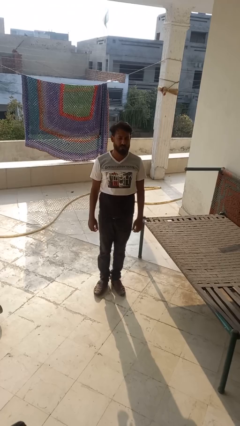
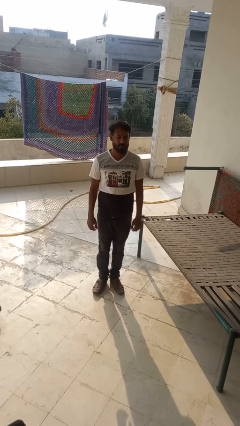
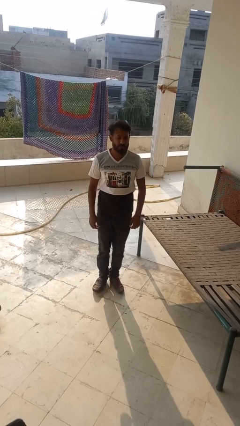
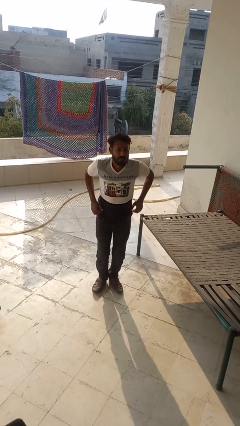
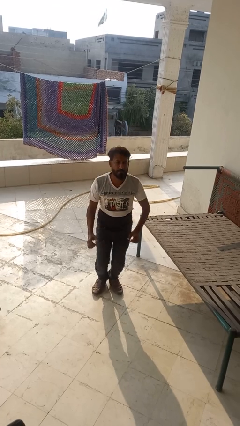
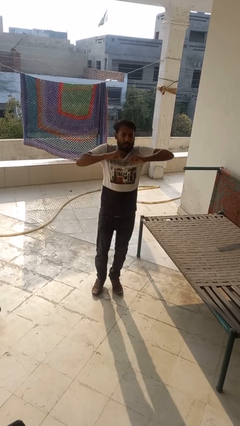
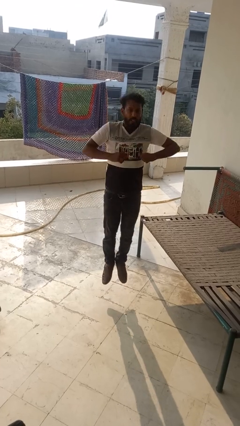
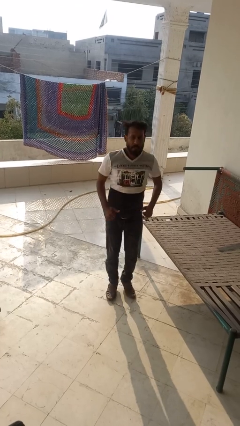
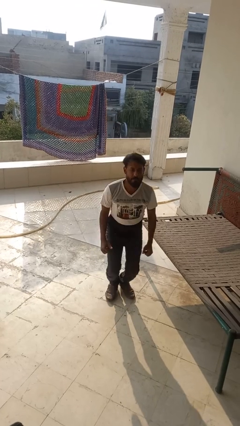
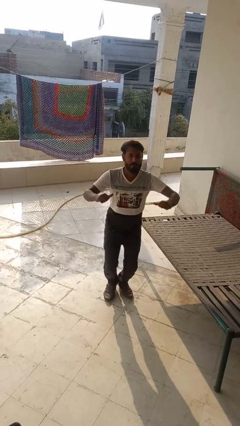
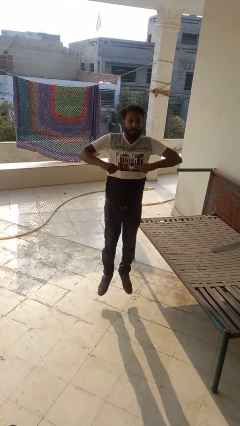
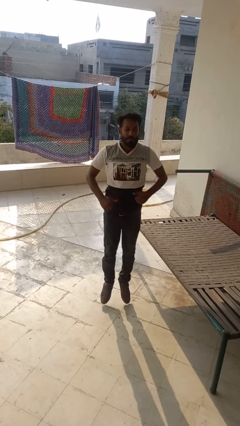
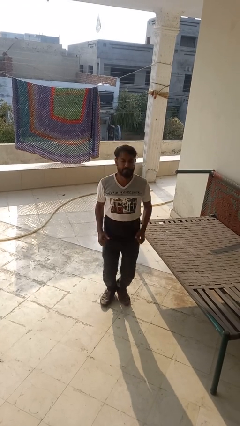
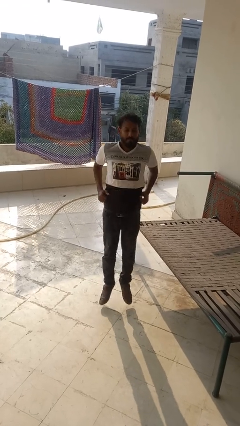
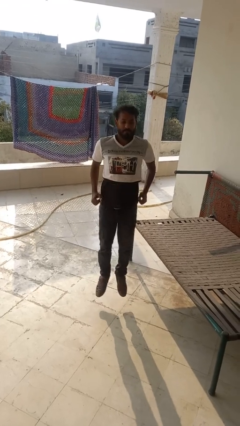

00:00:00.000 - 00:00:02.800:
person jumps

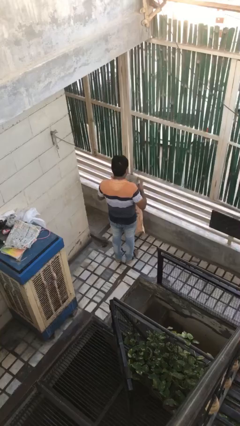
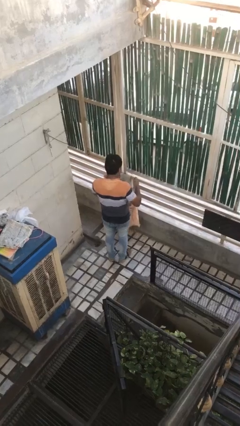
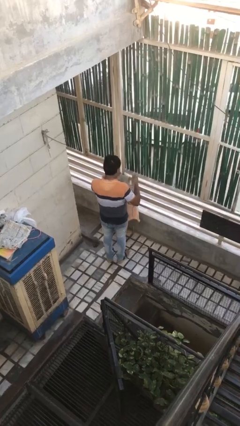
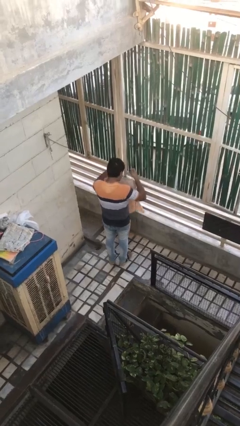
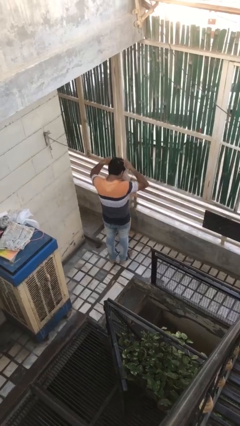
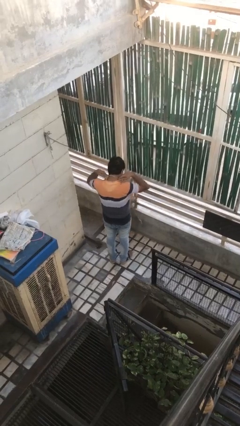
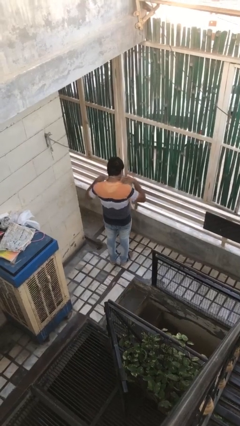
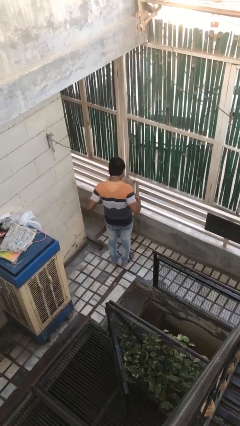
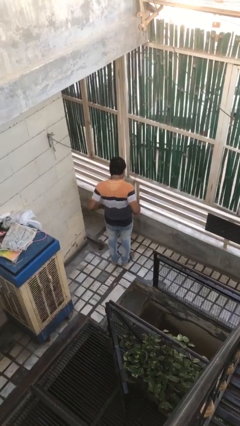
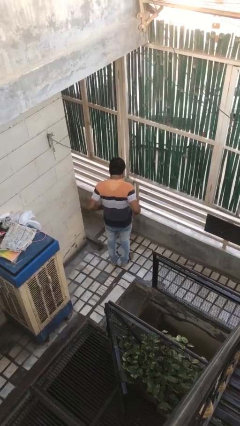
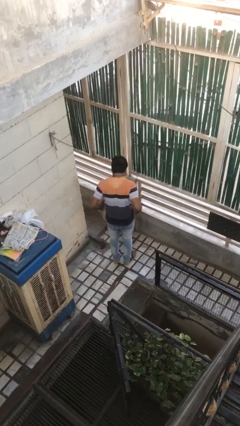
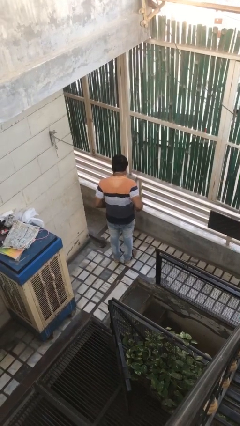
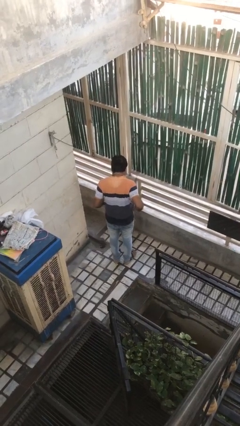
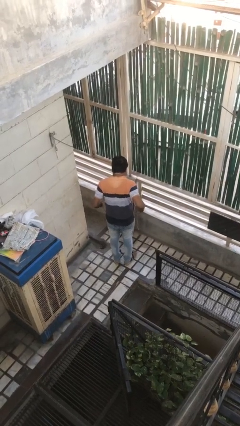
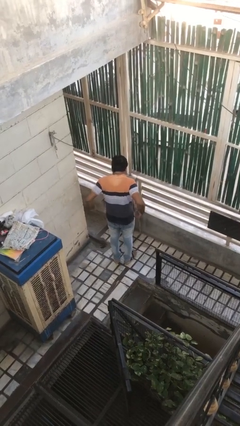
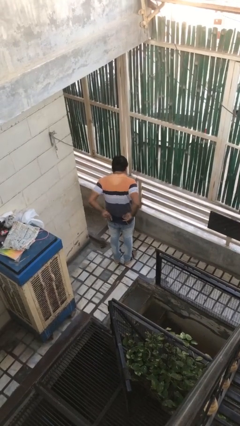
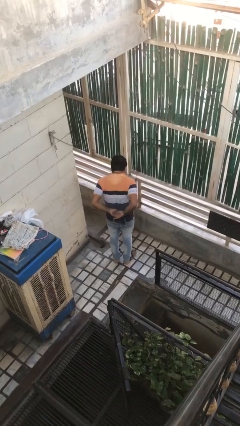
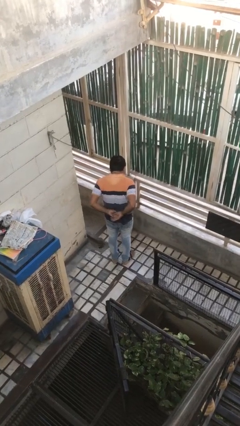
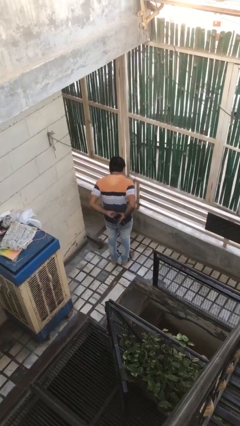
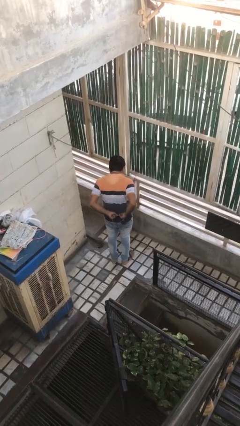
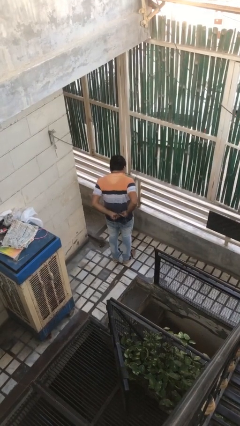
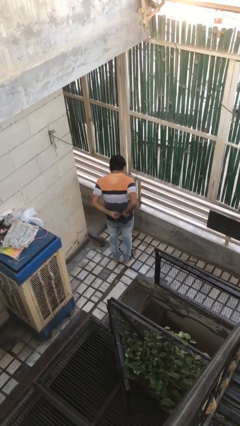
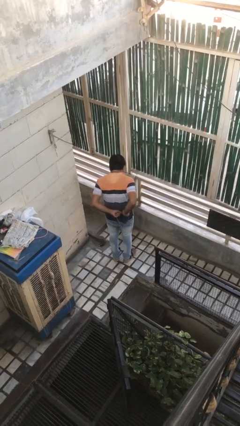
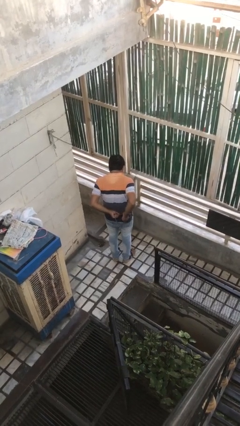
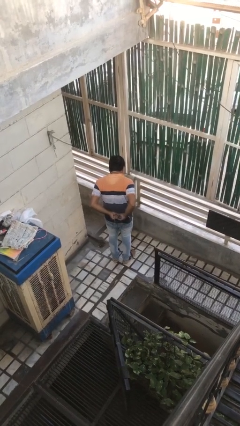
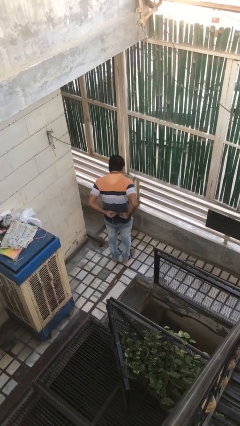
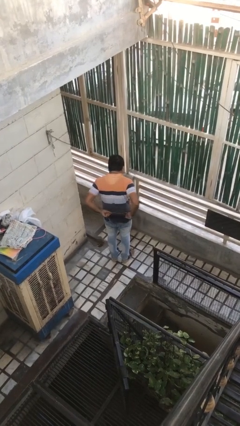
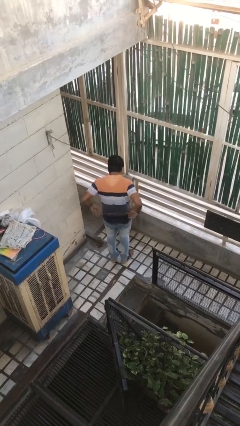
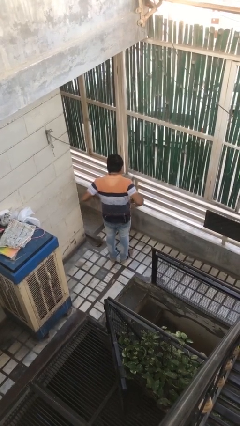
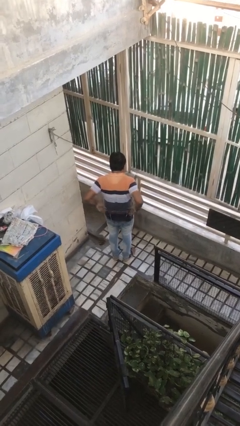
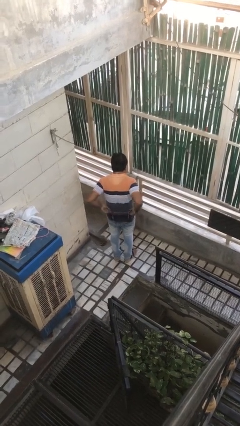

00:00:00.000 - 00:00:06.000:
person puts on apron

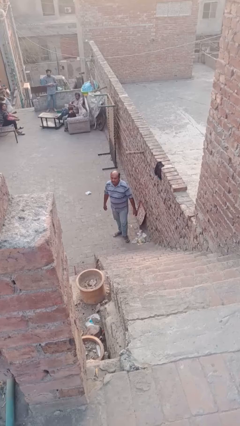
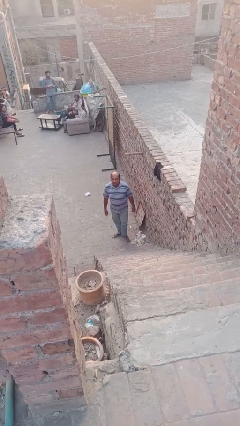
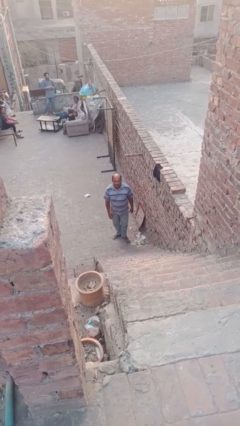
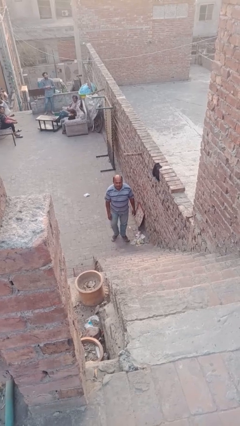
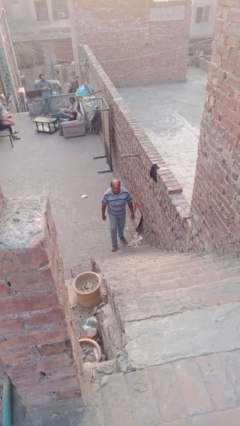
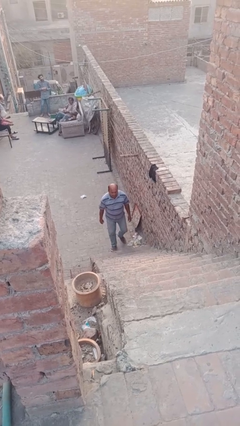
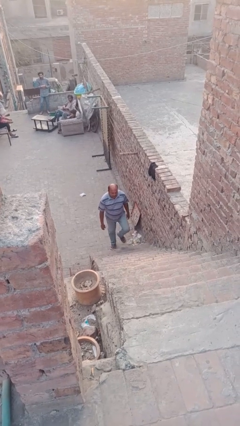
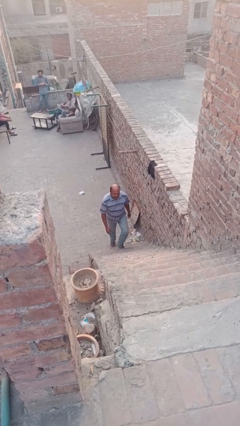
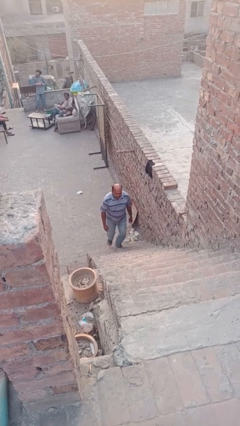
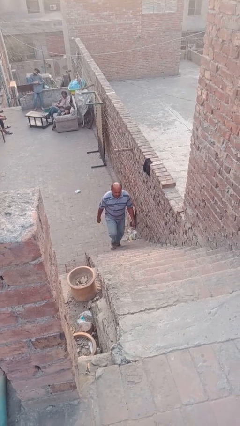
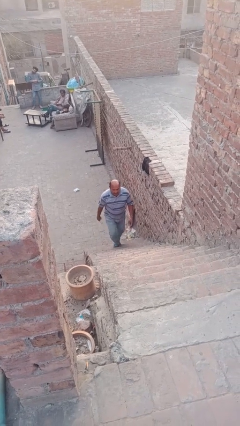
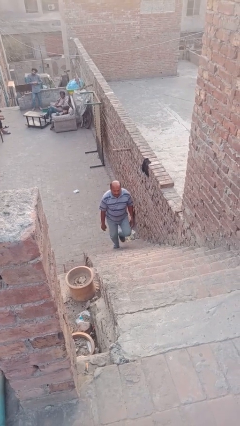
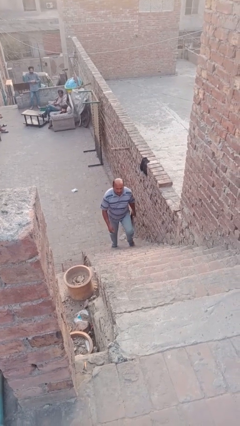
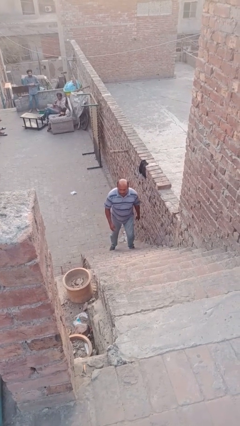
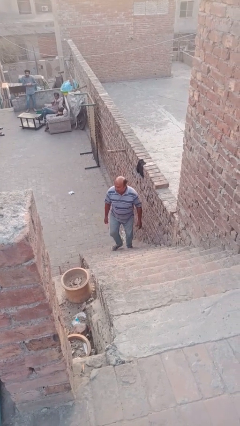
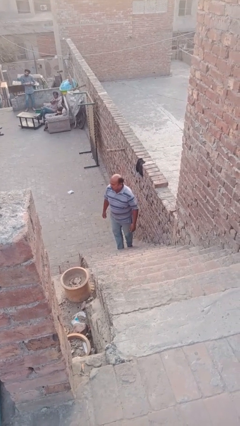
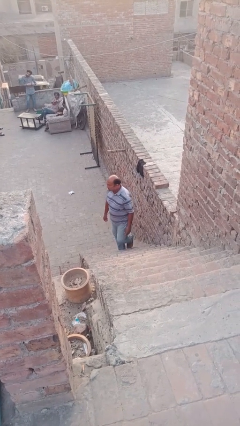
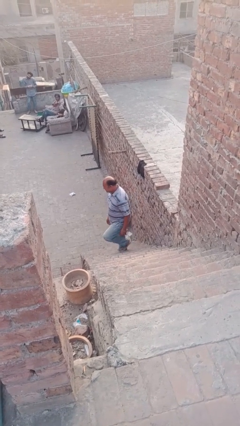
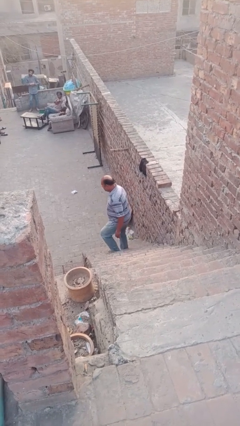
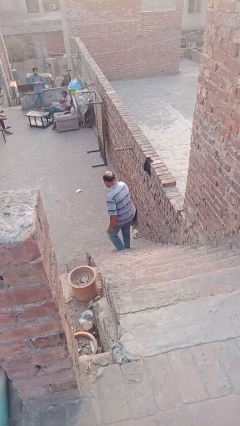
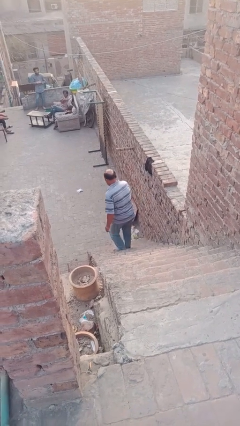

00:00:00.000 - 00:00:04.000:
person climbs up stairs

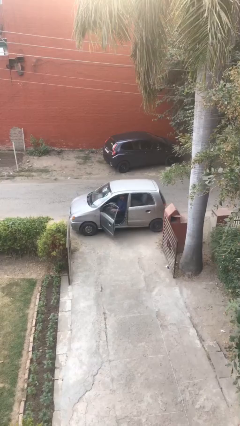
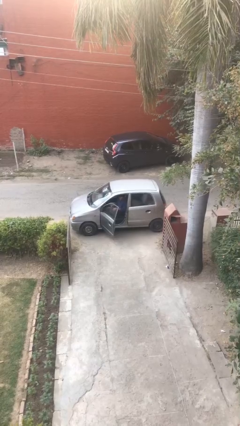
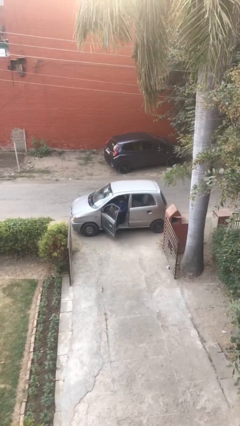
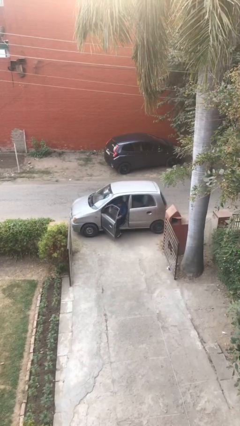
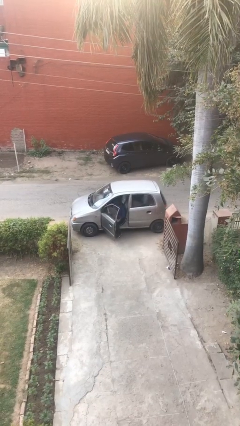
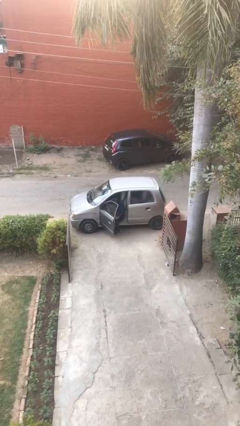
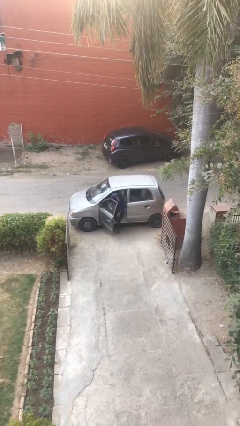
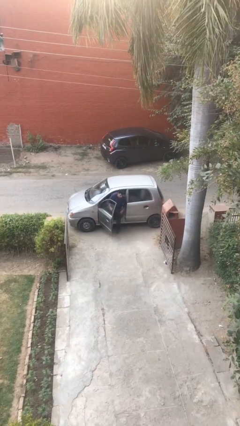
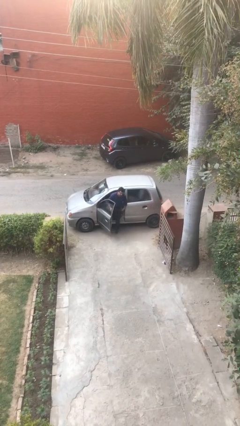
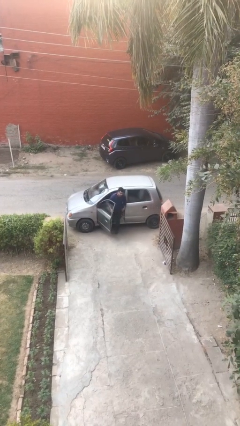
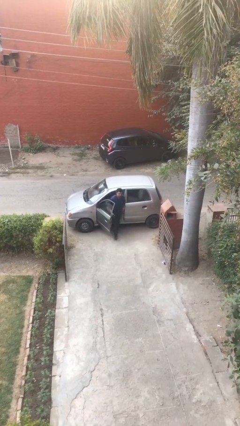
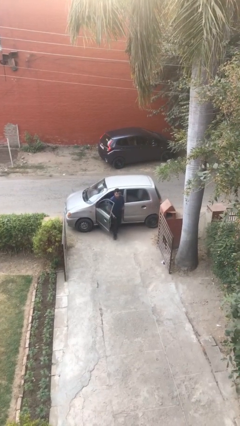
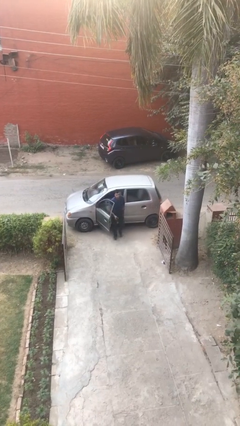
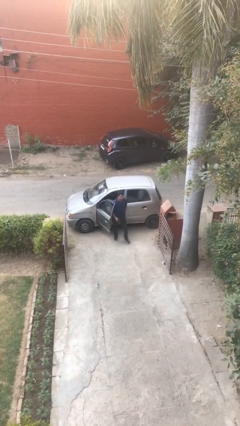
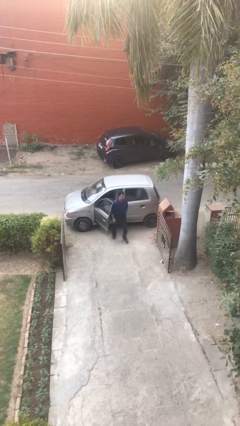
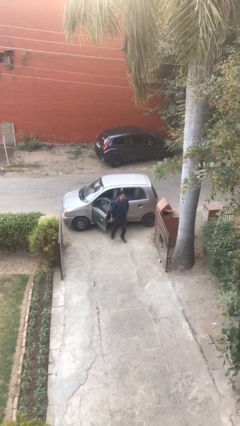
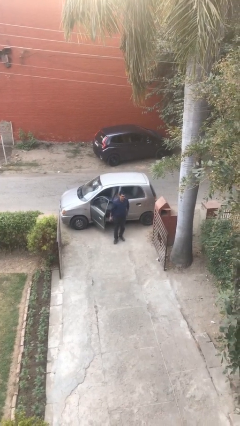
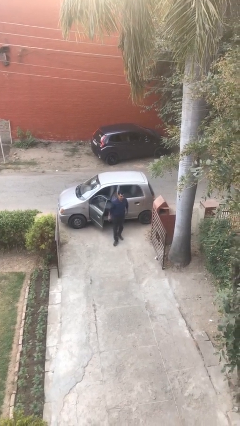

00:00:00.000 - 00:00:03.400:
person exits car

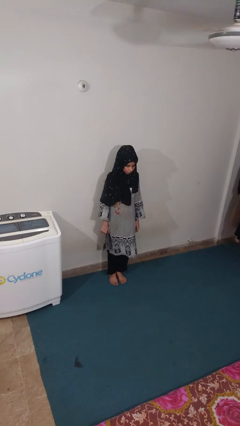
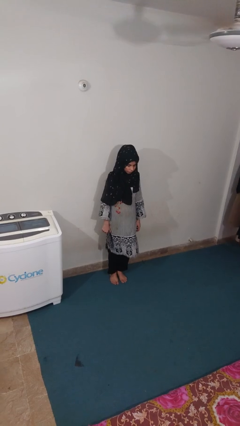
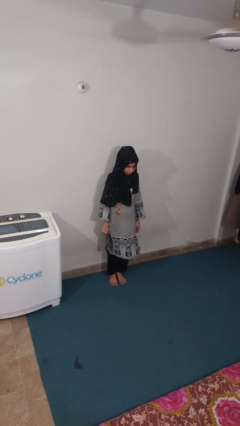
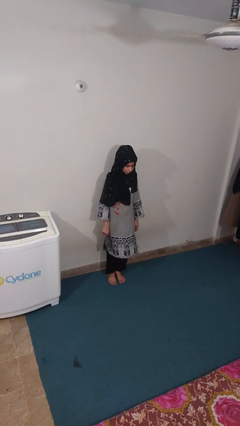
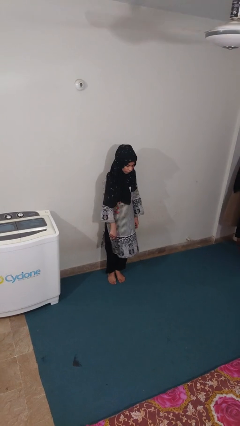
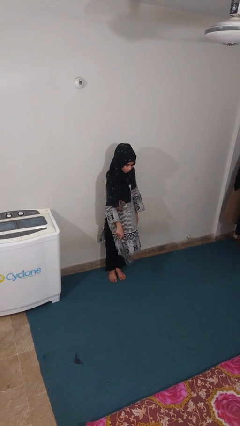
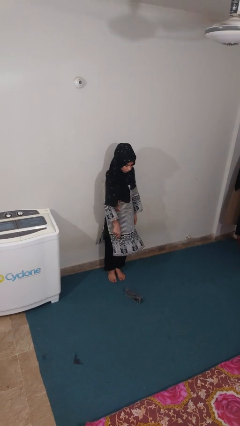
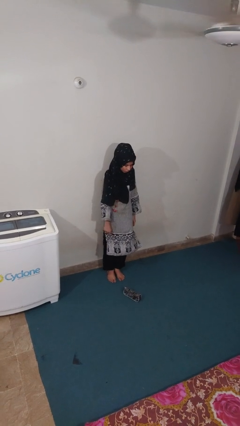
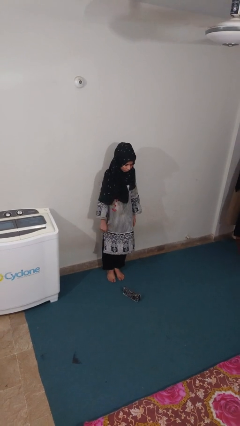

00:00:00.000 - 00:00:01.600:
person throws object to ground
